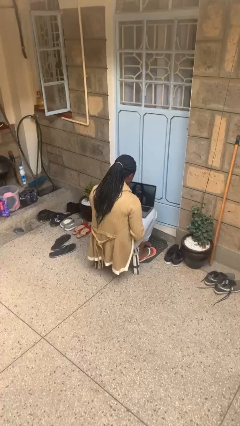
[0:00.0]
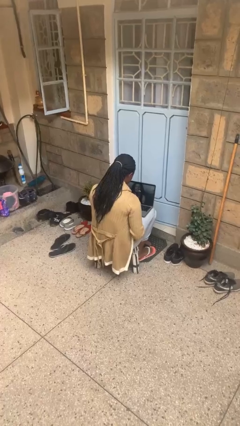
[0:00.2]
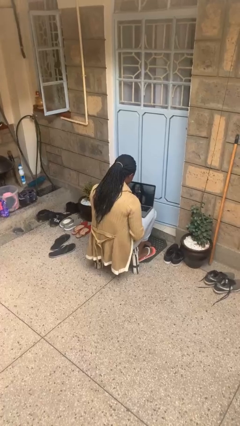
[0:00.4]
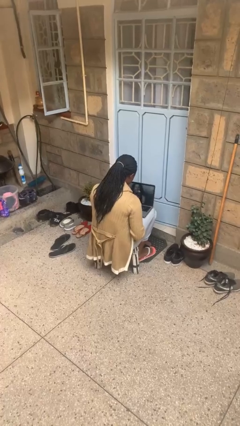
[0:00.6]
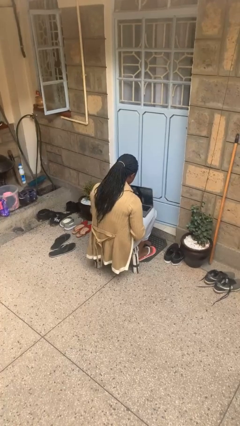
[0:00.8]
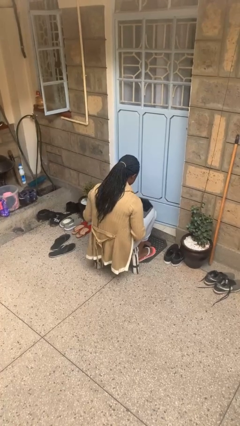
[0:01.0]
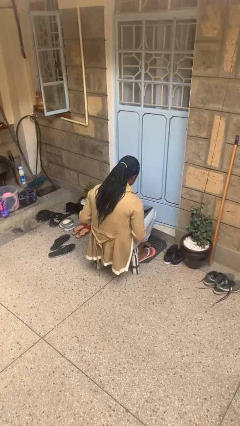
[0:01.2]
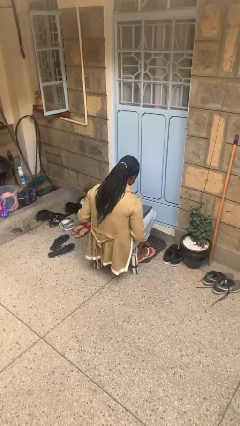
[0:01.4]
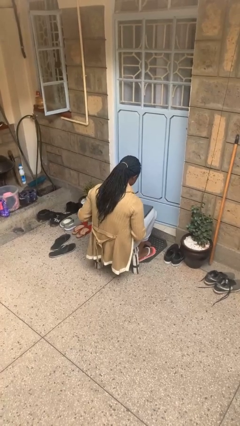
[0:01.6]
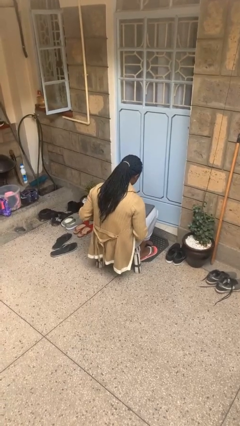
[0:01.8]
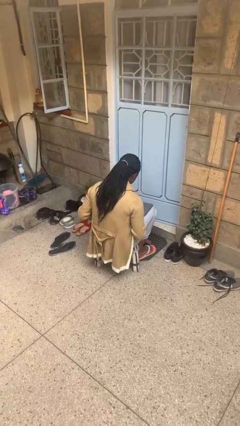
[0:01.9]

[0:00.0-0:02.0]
person closes laptop

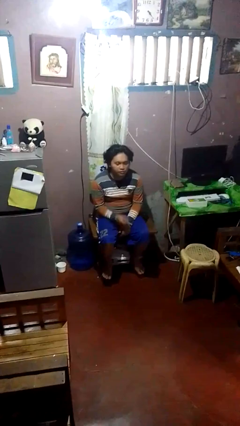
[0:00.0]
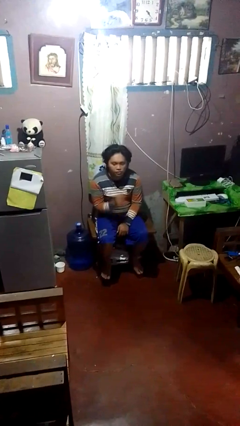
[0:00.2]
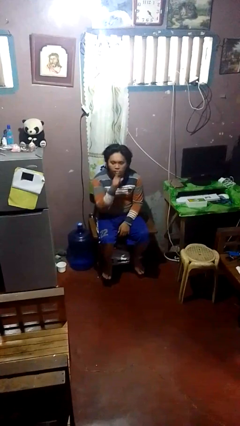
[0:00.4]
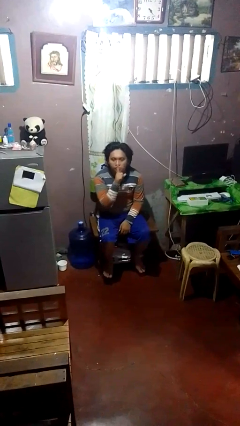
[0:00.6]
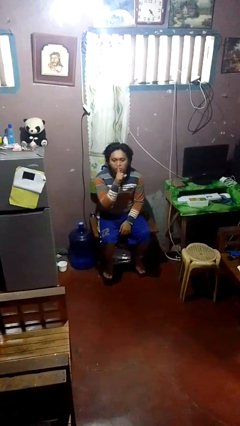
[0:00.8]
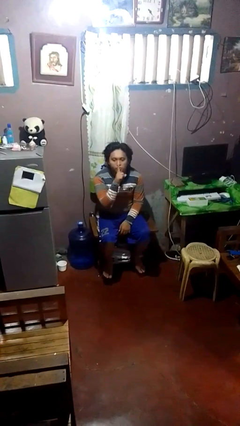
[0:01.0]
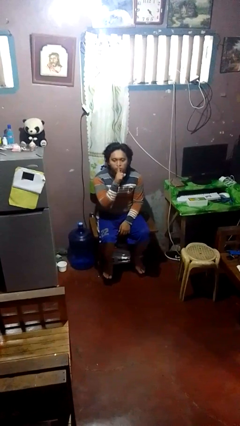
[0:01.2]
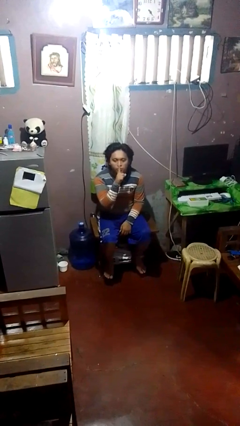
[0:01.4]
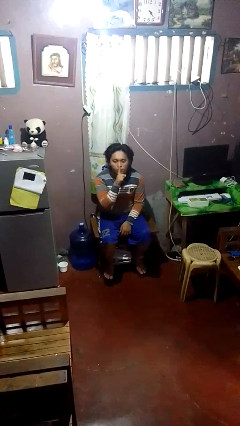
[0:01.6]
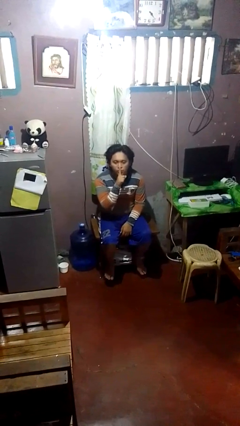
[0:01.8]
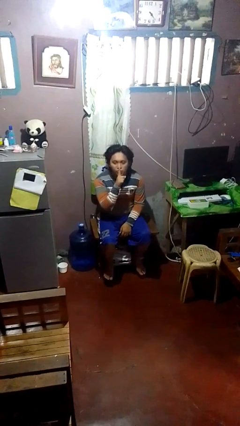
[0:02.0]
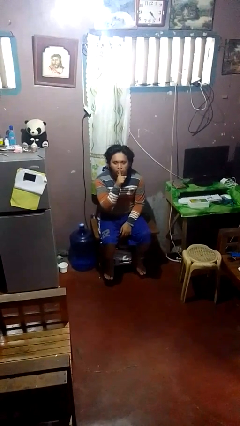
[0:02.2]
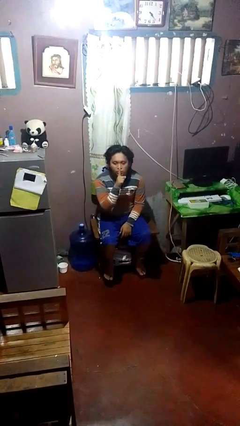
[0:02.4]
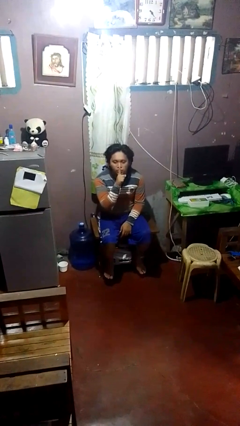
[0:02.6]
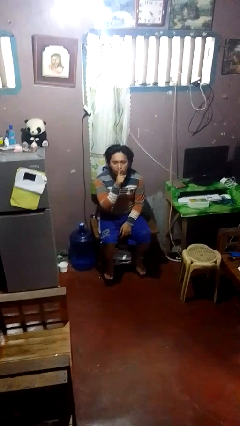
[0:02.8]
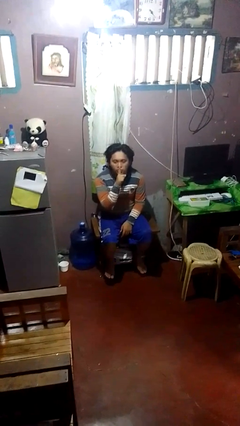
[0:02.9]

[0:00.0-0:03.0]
person gestures be quiet

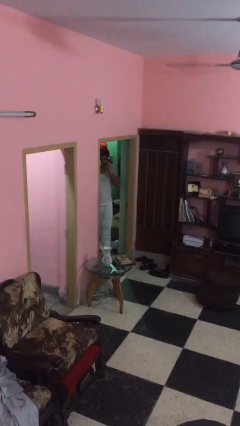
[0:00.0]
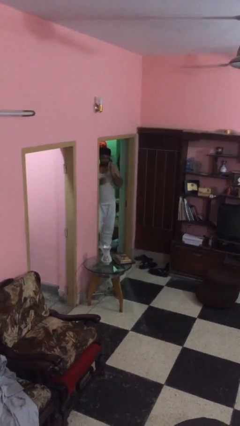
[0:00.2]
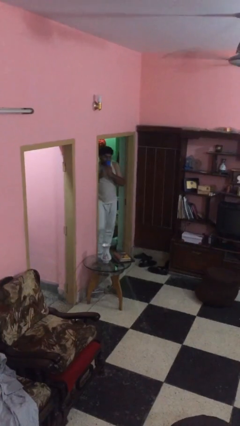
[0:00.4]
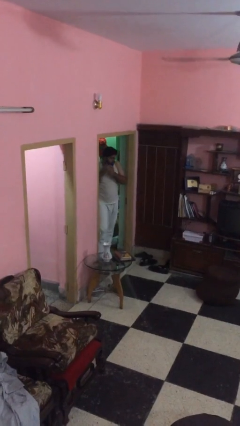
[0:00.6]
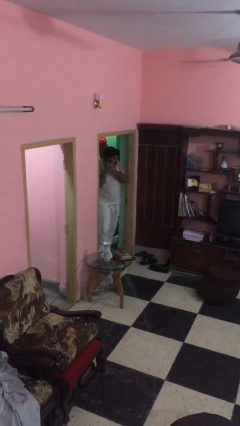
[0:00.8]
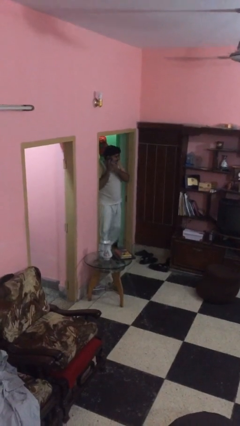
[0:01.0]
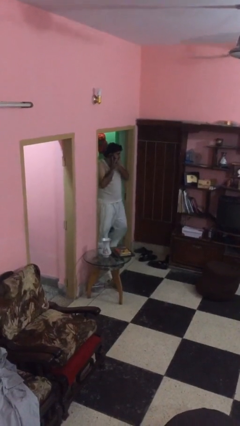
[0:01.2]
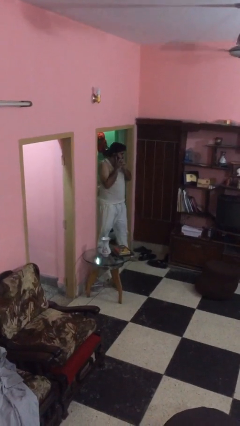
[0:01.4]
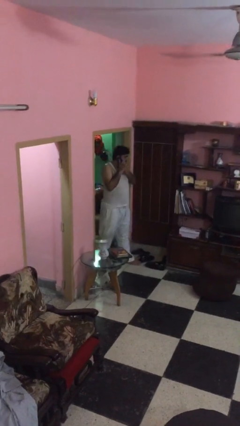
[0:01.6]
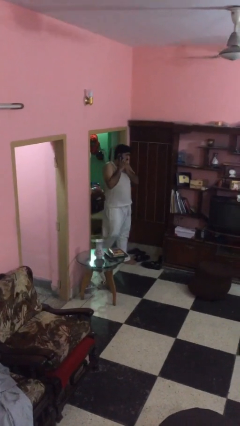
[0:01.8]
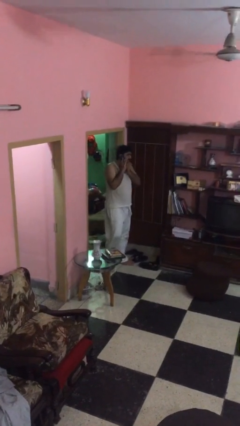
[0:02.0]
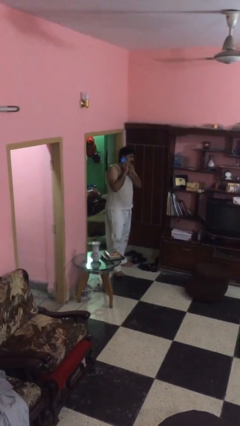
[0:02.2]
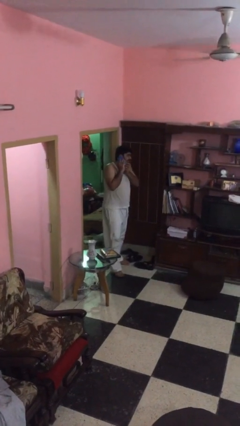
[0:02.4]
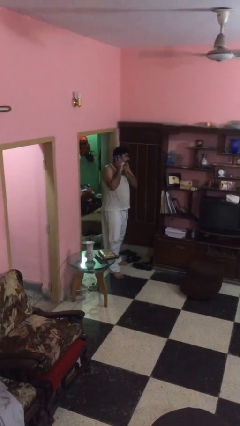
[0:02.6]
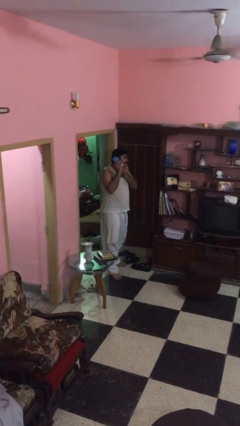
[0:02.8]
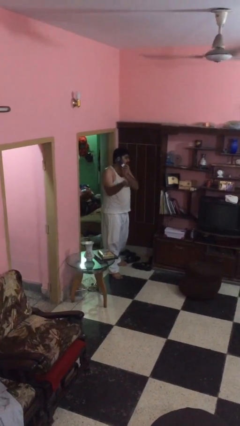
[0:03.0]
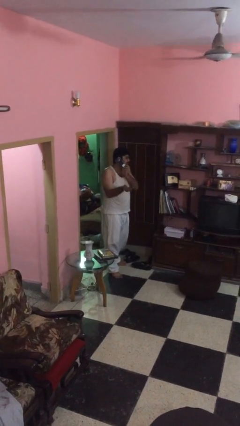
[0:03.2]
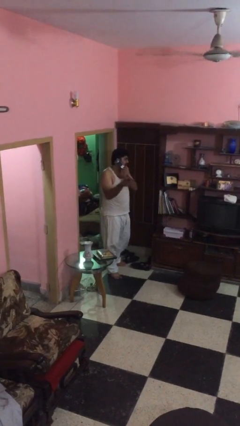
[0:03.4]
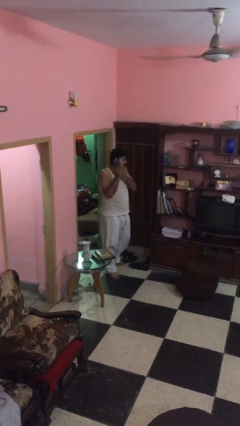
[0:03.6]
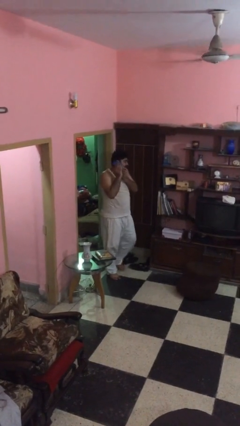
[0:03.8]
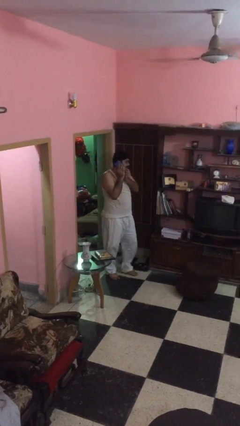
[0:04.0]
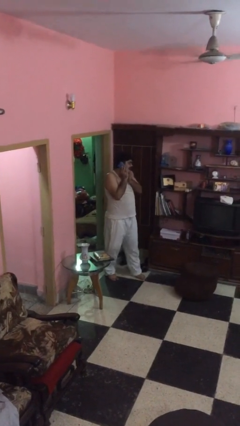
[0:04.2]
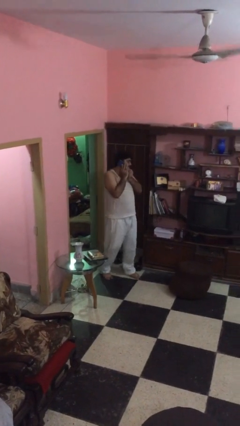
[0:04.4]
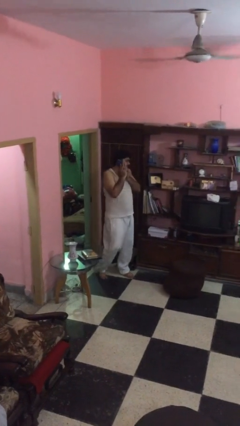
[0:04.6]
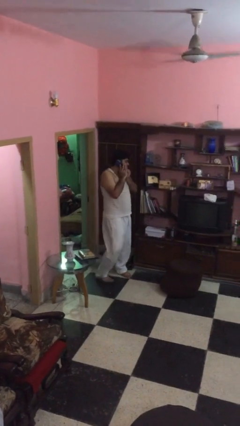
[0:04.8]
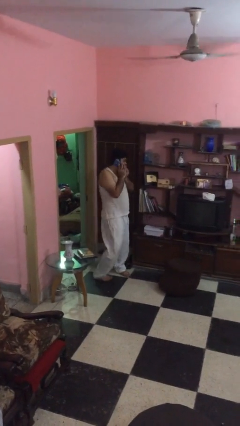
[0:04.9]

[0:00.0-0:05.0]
person enters scene through structure

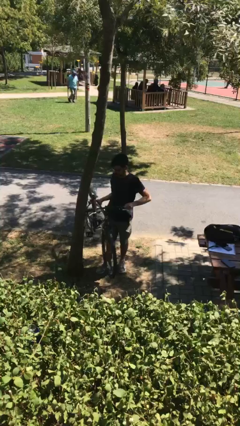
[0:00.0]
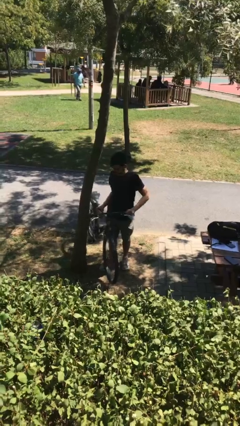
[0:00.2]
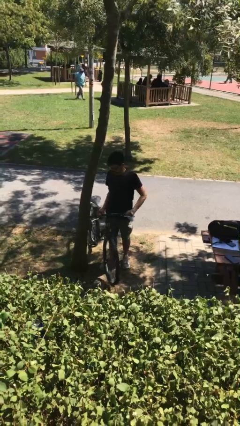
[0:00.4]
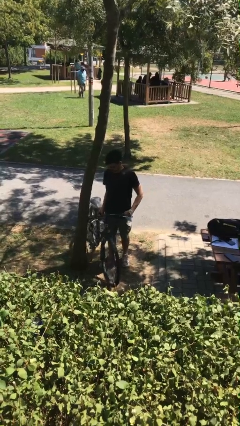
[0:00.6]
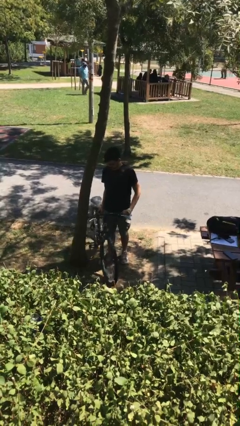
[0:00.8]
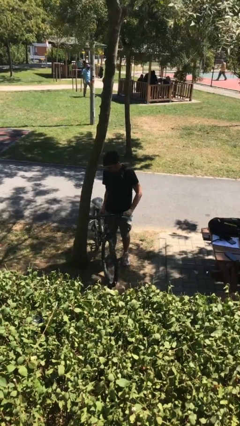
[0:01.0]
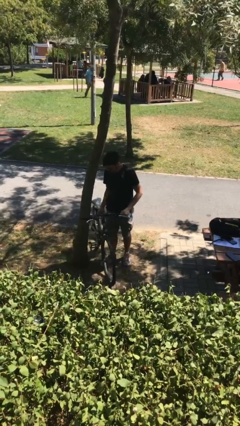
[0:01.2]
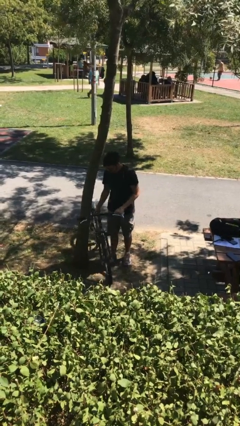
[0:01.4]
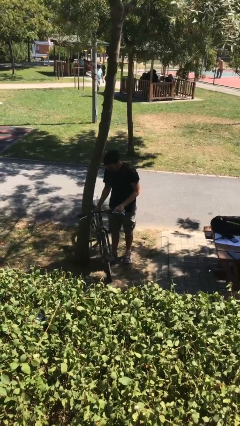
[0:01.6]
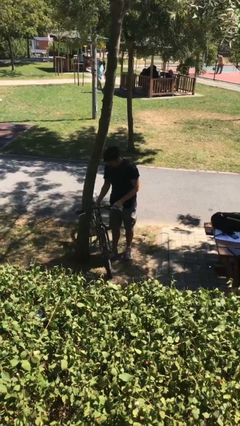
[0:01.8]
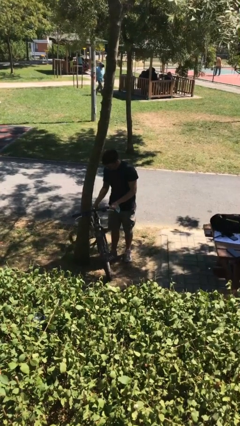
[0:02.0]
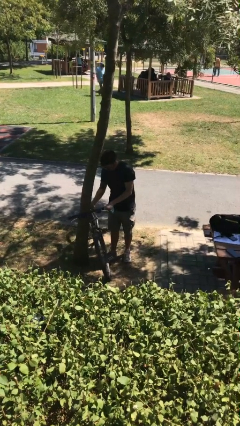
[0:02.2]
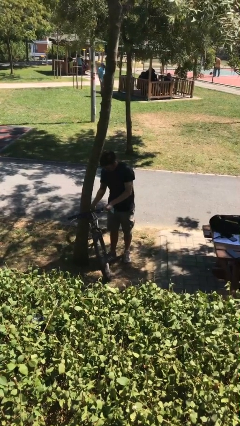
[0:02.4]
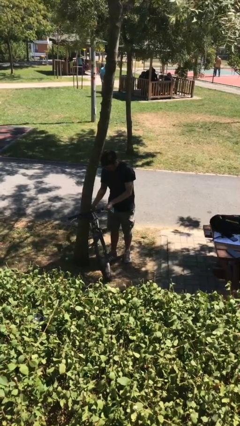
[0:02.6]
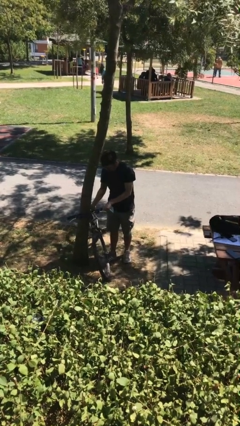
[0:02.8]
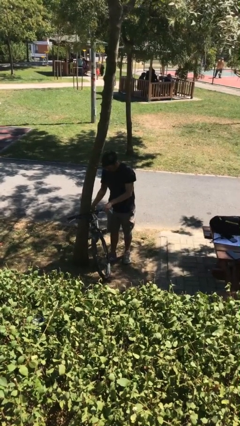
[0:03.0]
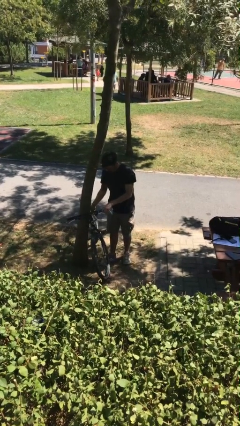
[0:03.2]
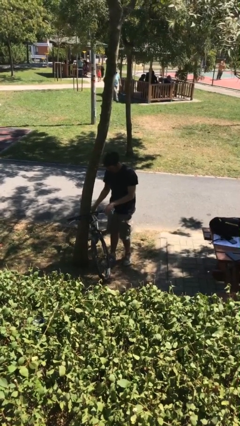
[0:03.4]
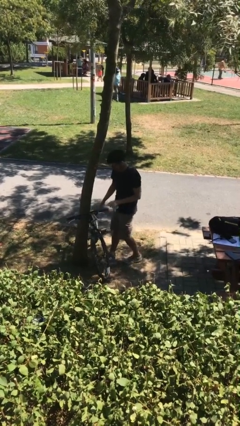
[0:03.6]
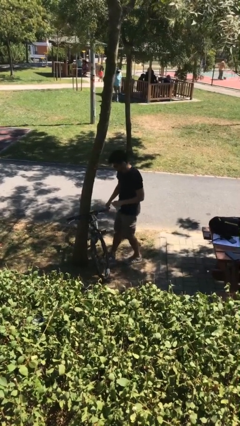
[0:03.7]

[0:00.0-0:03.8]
person puts down object on floor

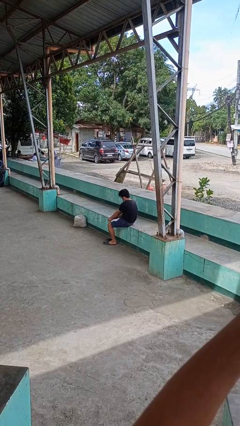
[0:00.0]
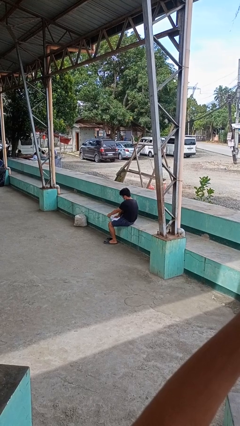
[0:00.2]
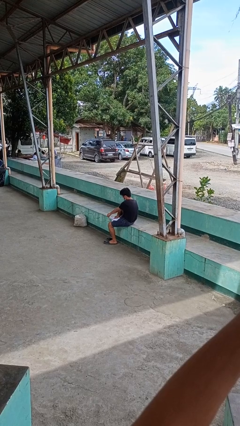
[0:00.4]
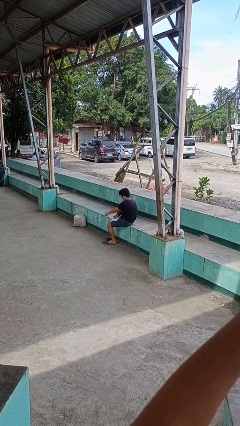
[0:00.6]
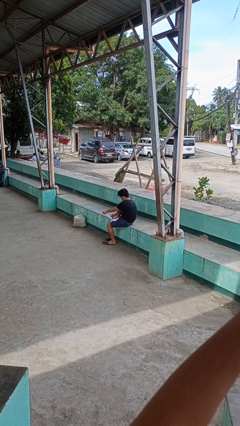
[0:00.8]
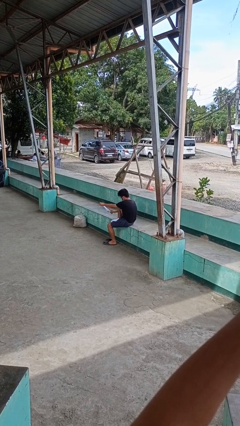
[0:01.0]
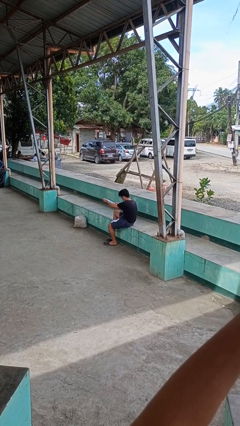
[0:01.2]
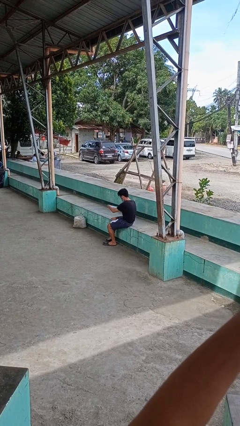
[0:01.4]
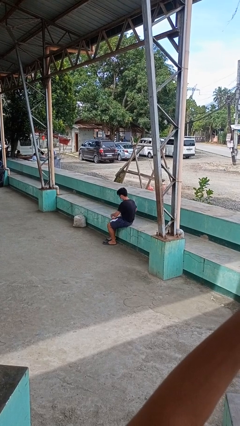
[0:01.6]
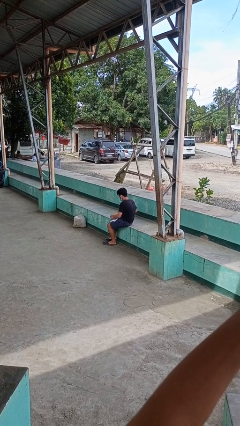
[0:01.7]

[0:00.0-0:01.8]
person takes off socks

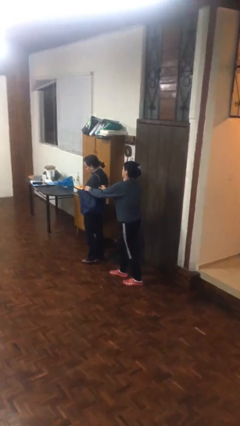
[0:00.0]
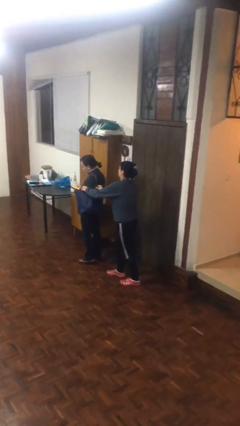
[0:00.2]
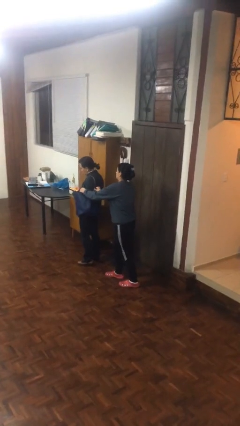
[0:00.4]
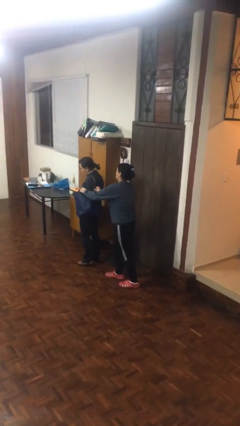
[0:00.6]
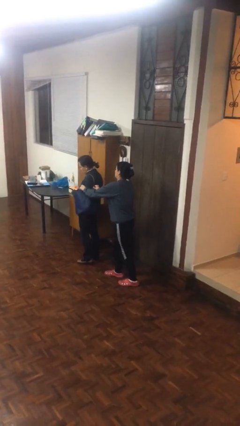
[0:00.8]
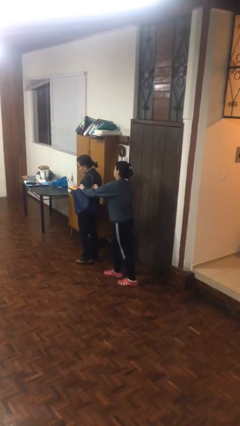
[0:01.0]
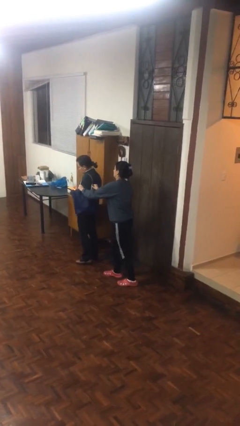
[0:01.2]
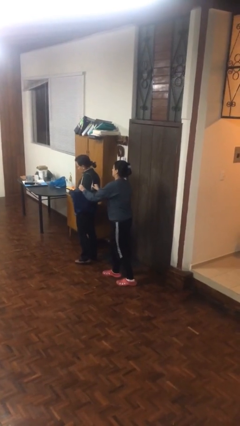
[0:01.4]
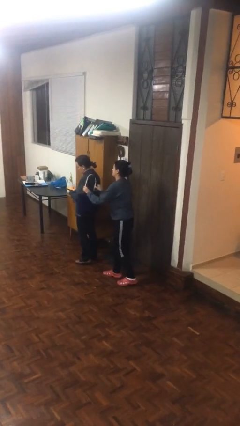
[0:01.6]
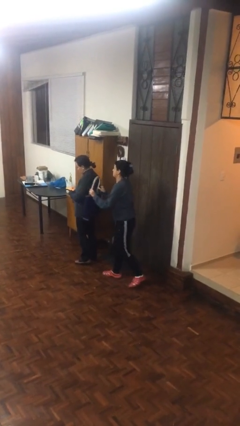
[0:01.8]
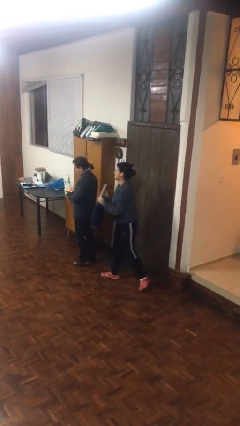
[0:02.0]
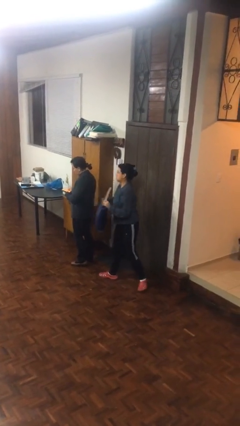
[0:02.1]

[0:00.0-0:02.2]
person steals object from person
